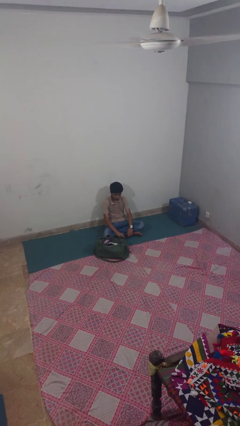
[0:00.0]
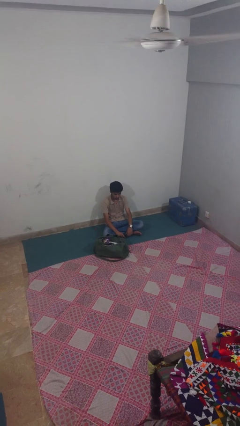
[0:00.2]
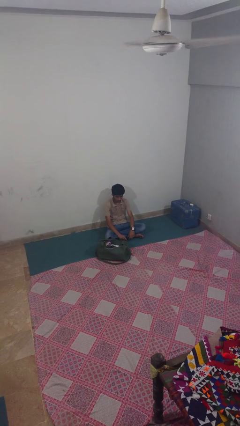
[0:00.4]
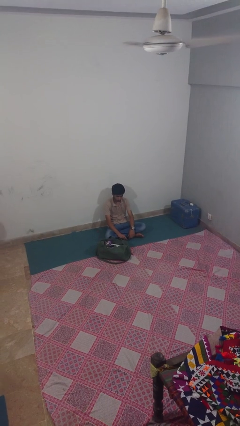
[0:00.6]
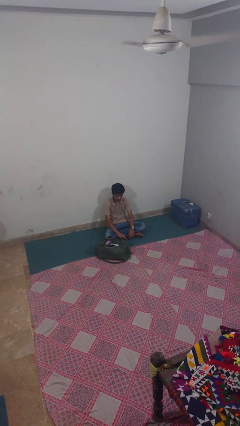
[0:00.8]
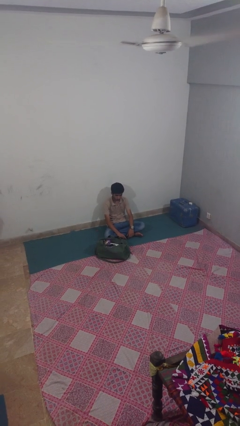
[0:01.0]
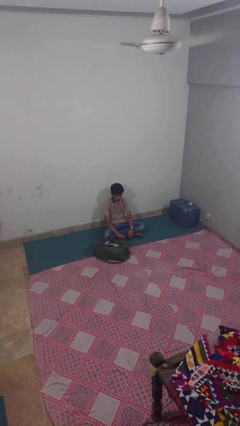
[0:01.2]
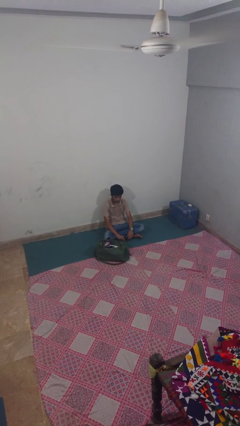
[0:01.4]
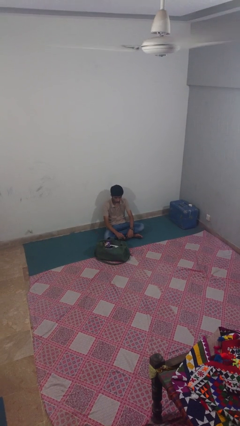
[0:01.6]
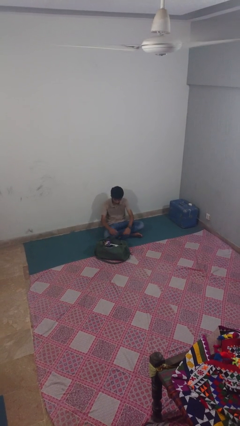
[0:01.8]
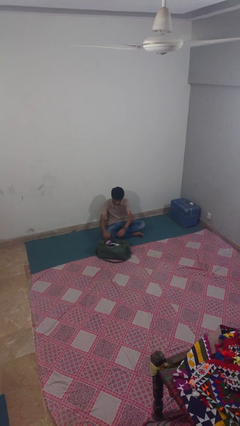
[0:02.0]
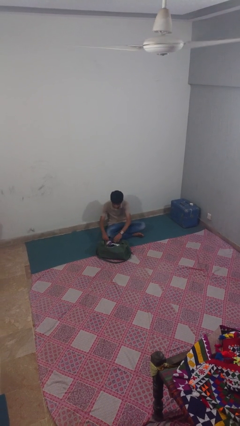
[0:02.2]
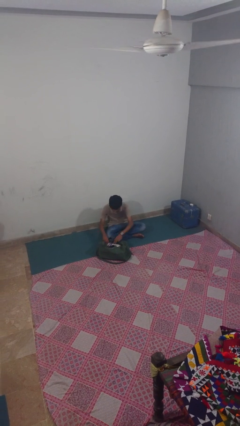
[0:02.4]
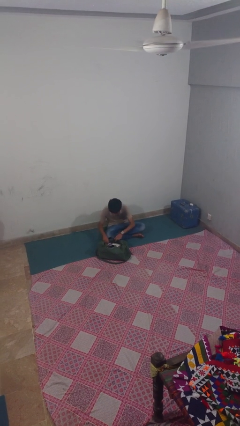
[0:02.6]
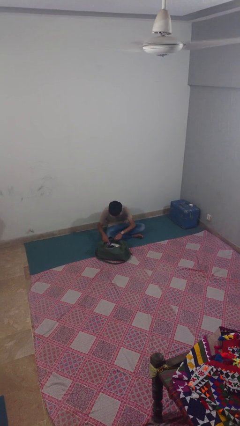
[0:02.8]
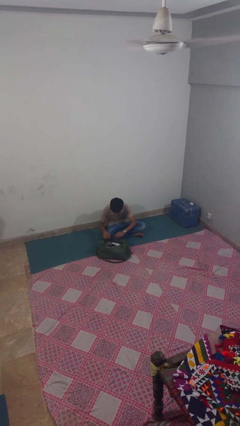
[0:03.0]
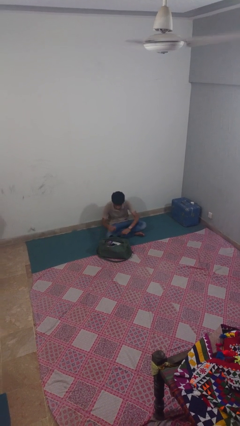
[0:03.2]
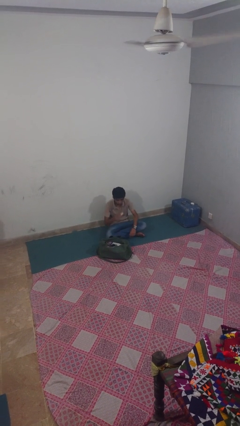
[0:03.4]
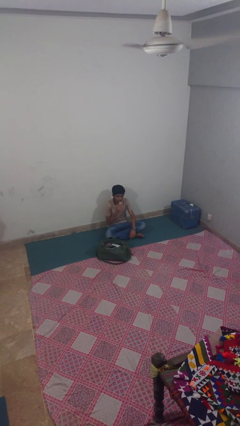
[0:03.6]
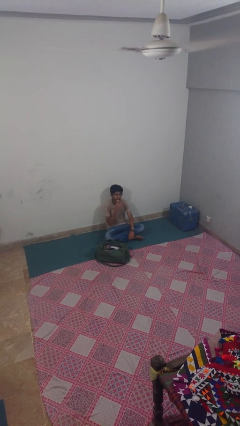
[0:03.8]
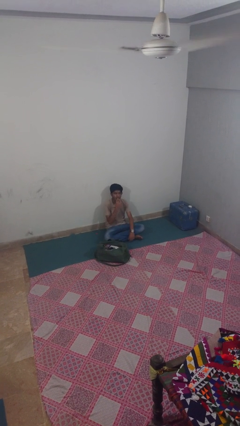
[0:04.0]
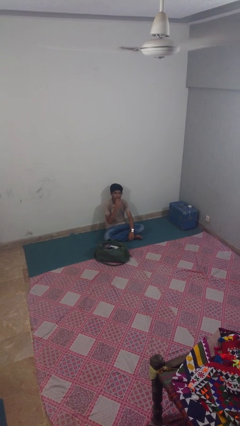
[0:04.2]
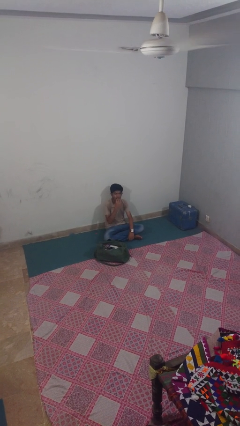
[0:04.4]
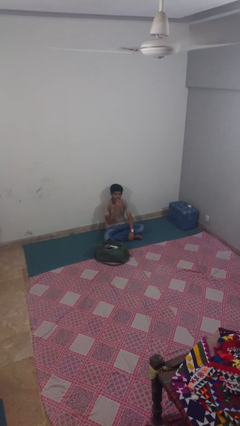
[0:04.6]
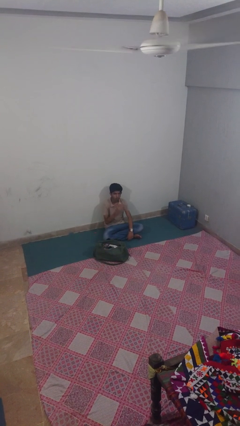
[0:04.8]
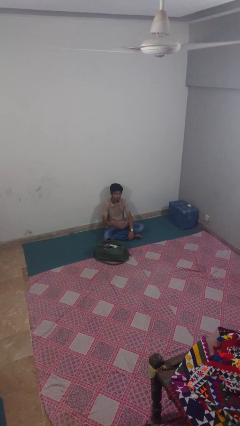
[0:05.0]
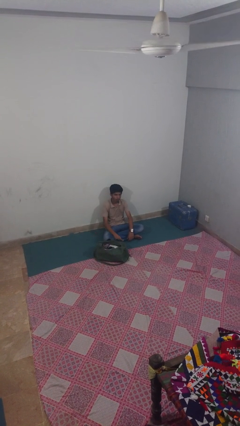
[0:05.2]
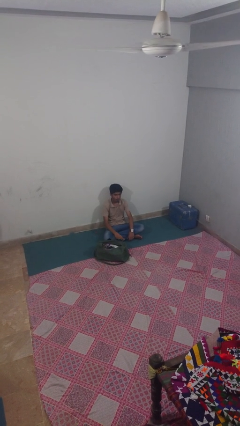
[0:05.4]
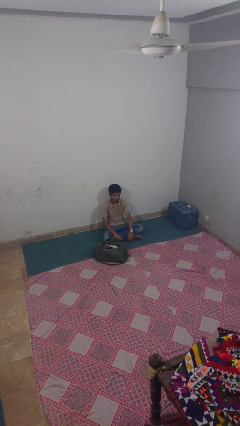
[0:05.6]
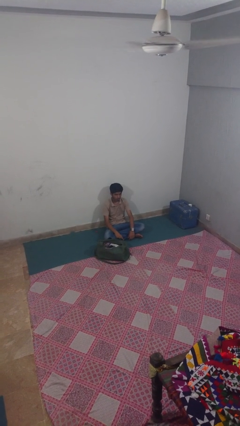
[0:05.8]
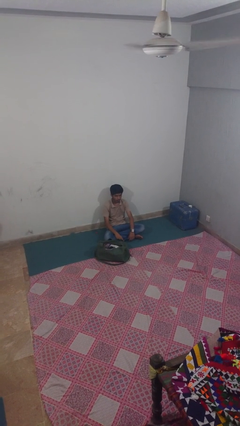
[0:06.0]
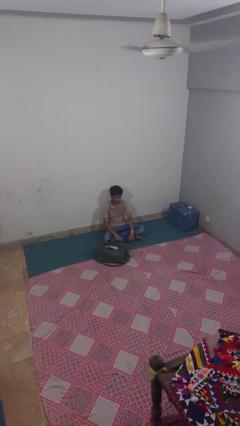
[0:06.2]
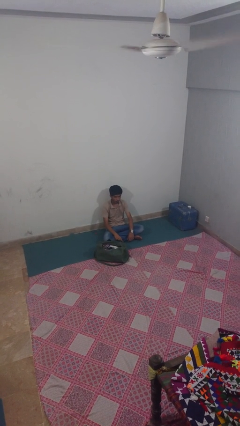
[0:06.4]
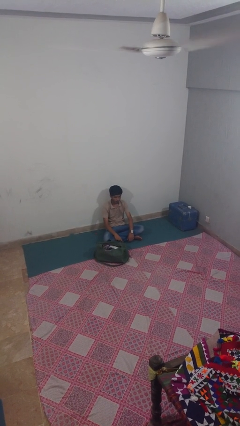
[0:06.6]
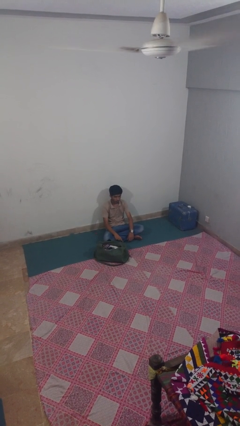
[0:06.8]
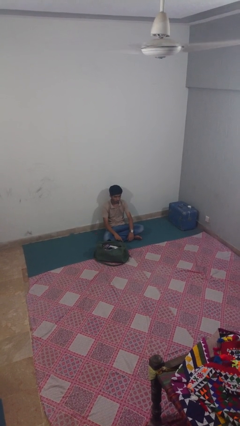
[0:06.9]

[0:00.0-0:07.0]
person eats snack from bag

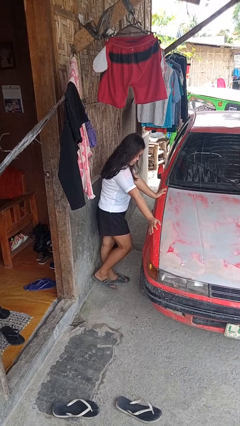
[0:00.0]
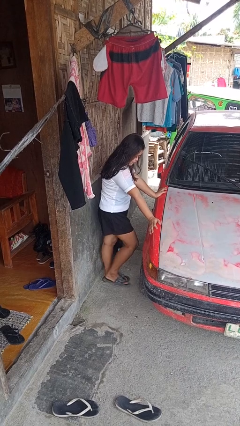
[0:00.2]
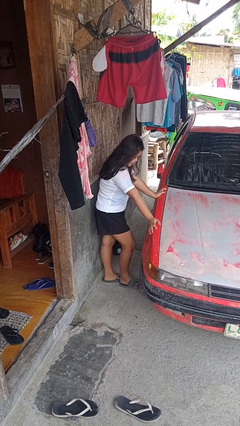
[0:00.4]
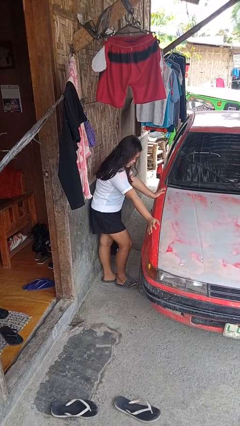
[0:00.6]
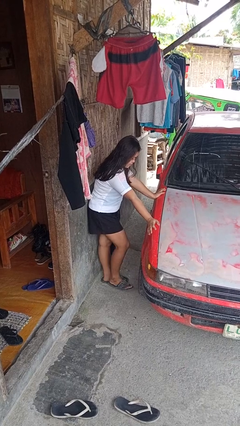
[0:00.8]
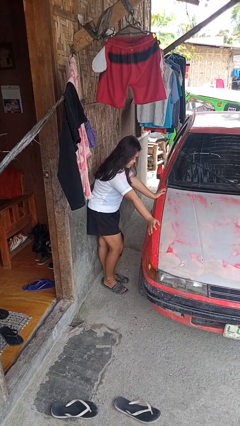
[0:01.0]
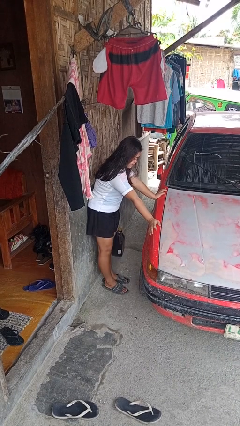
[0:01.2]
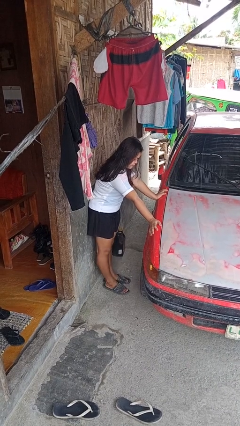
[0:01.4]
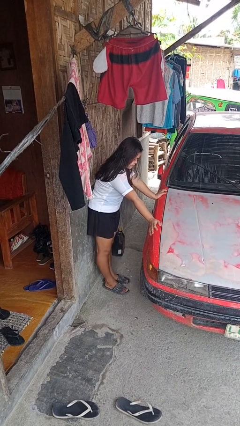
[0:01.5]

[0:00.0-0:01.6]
person kicks car tires

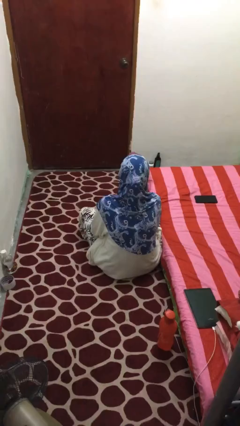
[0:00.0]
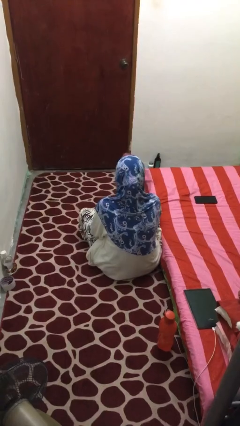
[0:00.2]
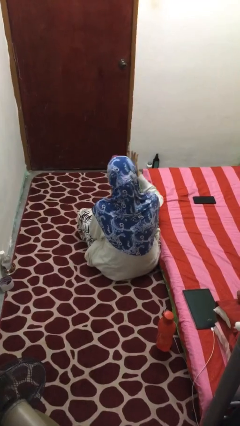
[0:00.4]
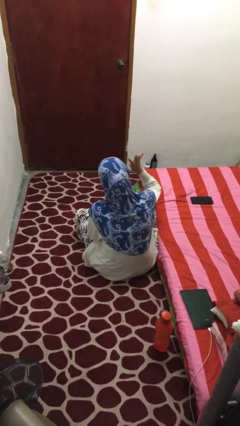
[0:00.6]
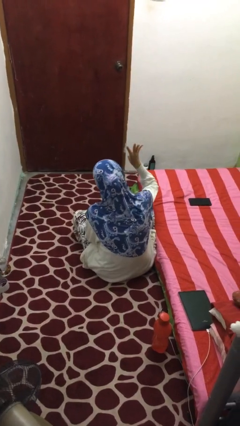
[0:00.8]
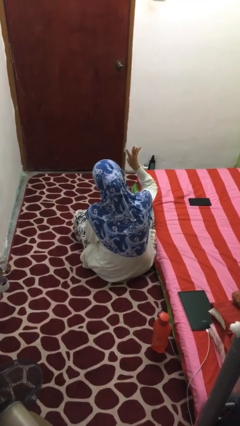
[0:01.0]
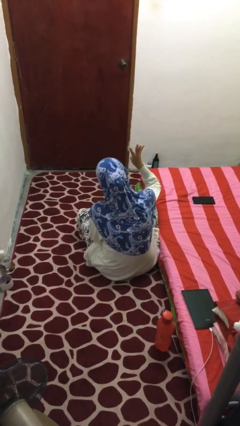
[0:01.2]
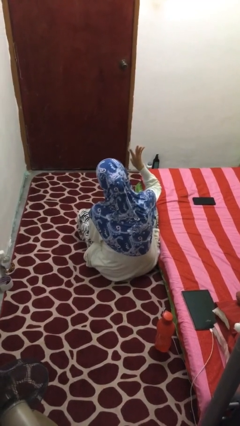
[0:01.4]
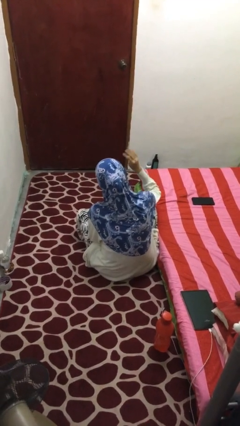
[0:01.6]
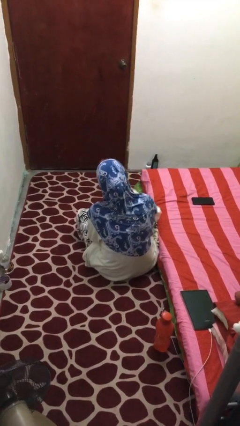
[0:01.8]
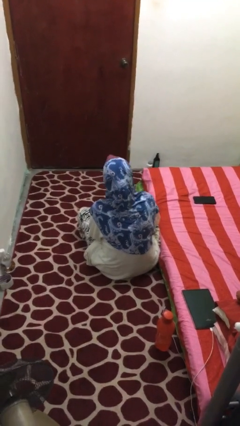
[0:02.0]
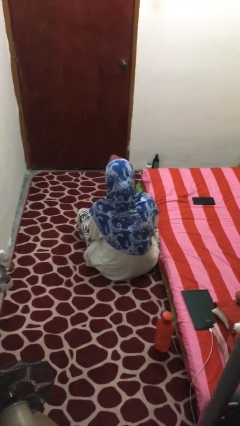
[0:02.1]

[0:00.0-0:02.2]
person gestures number four

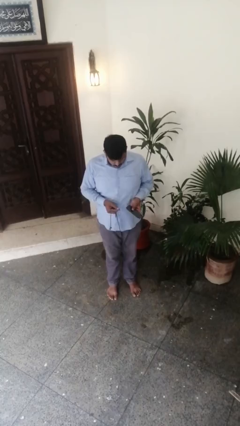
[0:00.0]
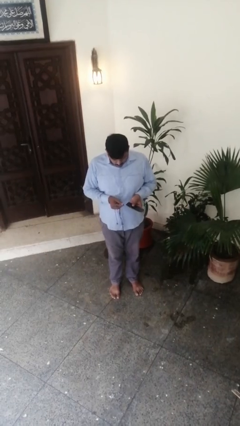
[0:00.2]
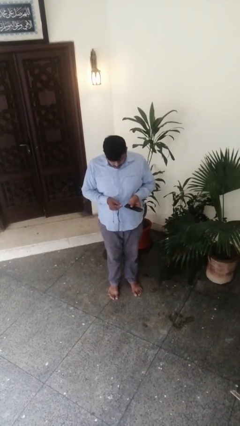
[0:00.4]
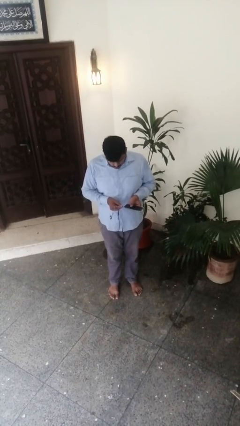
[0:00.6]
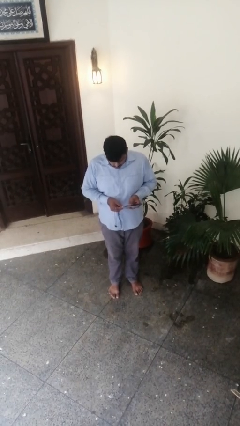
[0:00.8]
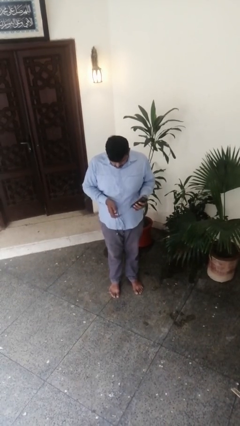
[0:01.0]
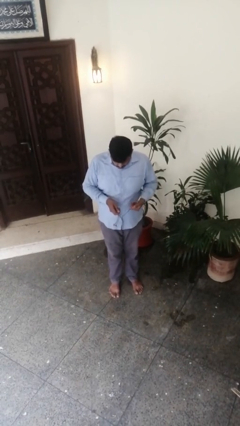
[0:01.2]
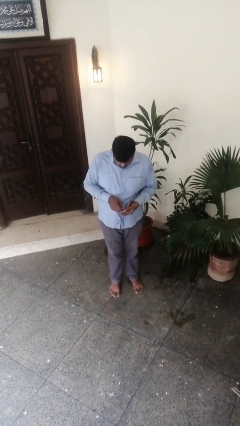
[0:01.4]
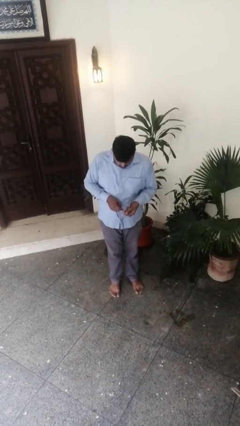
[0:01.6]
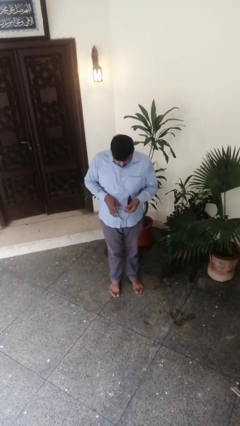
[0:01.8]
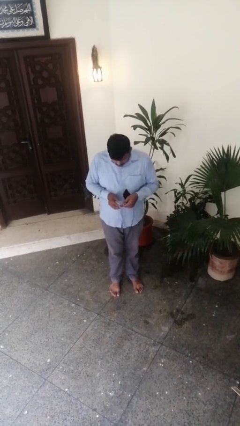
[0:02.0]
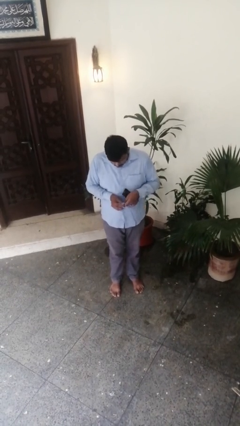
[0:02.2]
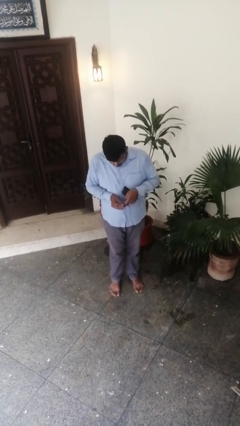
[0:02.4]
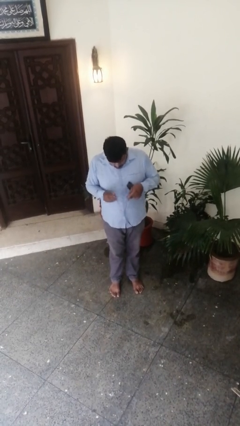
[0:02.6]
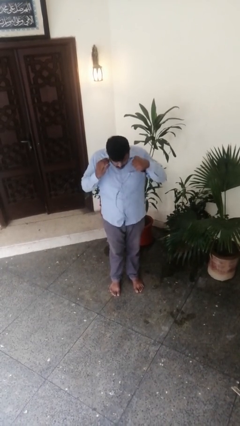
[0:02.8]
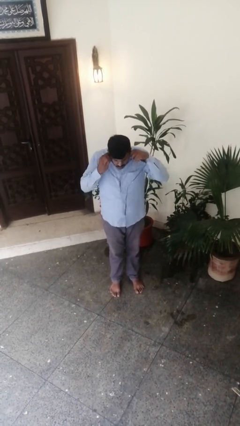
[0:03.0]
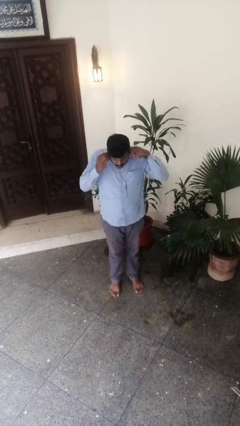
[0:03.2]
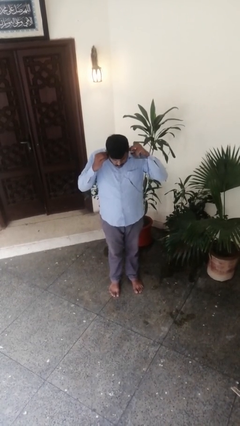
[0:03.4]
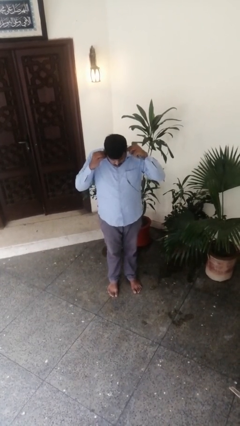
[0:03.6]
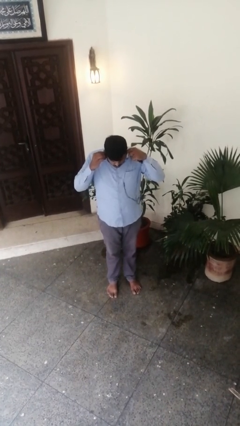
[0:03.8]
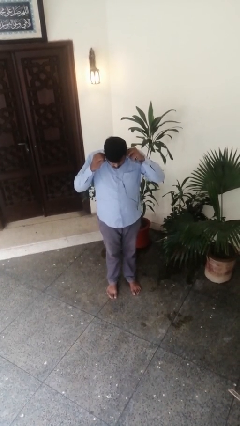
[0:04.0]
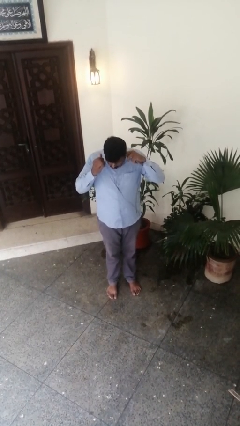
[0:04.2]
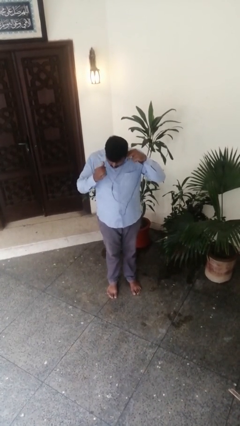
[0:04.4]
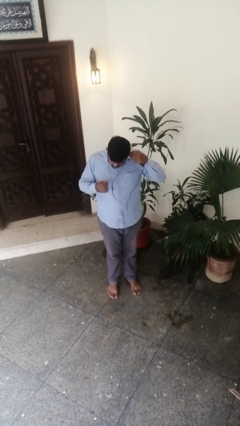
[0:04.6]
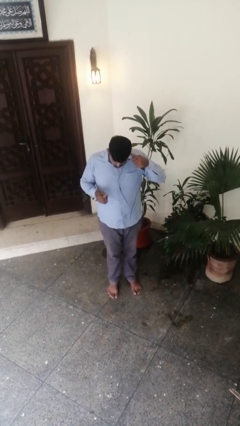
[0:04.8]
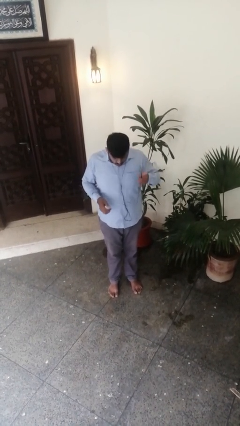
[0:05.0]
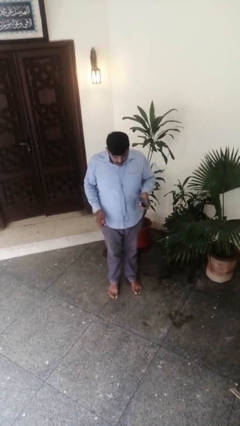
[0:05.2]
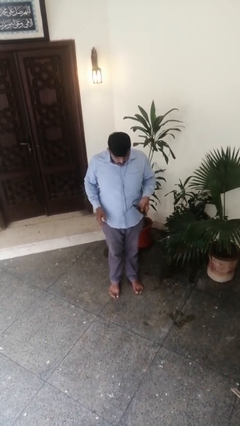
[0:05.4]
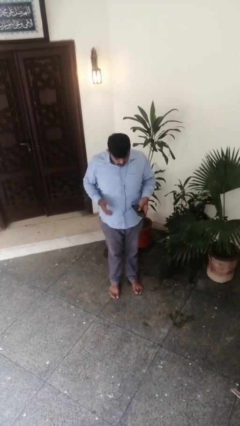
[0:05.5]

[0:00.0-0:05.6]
person puts on headphones

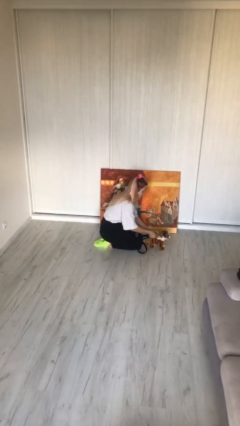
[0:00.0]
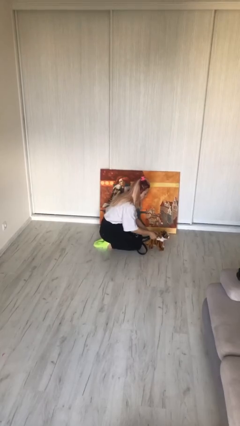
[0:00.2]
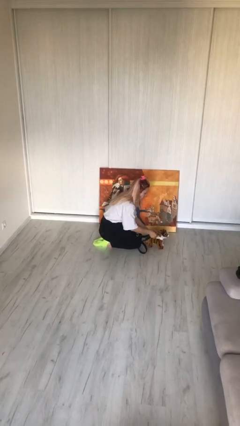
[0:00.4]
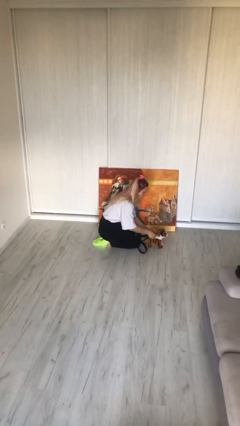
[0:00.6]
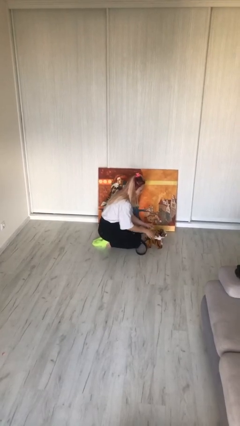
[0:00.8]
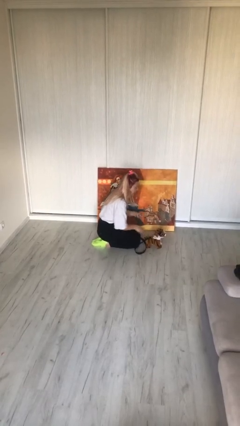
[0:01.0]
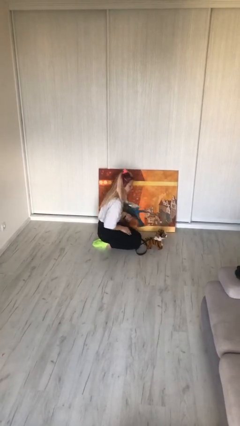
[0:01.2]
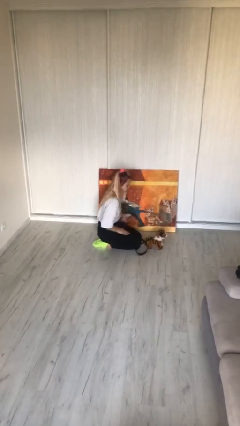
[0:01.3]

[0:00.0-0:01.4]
person attaches leash to dog
